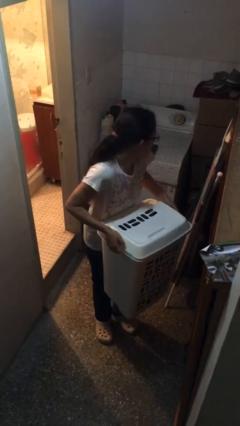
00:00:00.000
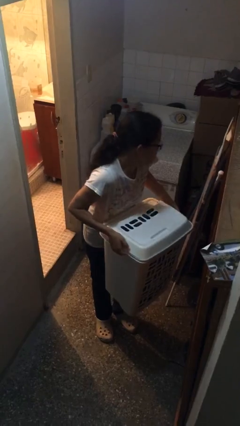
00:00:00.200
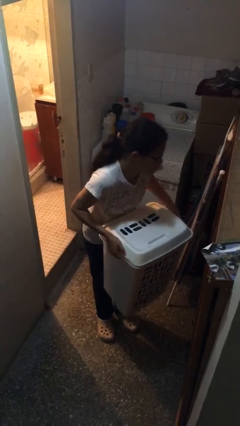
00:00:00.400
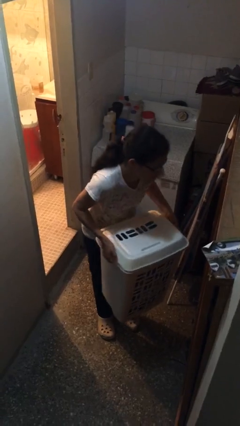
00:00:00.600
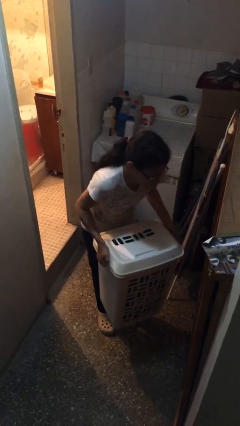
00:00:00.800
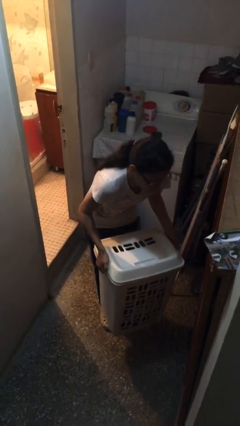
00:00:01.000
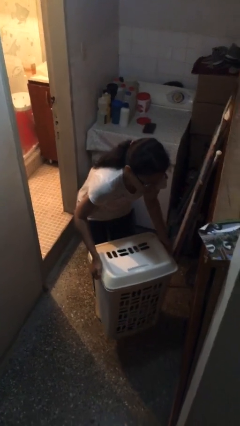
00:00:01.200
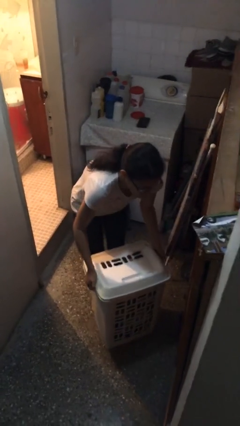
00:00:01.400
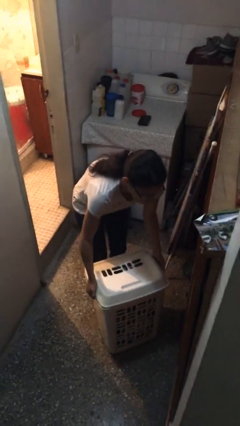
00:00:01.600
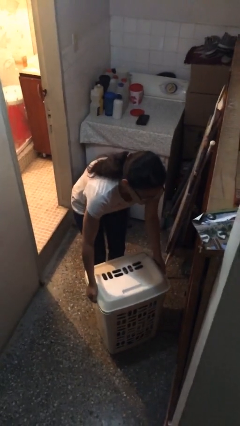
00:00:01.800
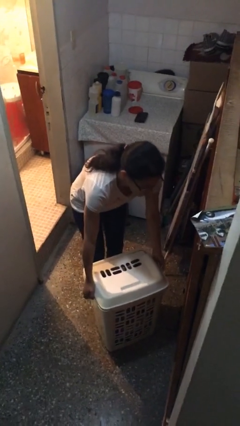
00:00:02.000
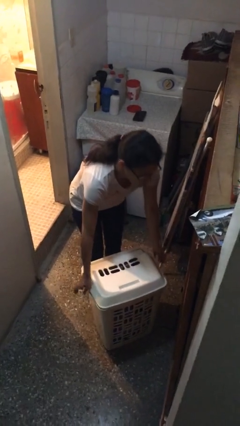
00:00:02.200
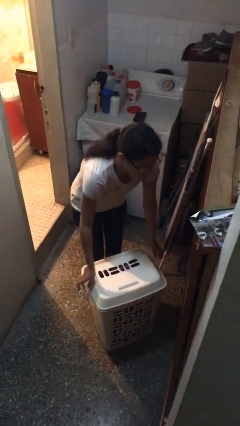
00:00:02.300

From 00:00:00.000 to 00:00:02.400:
person puts down object on floor

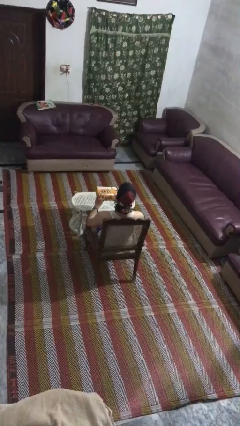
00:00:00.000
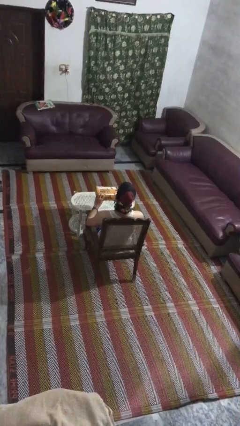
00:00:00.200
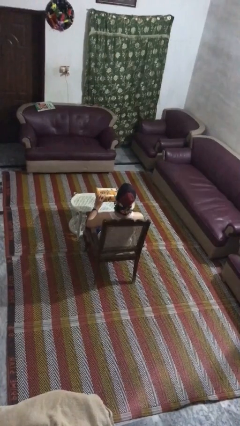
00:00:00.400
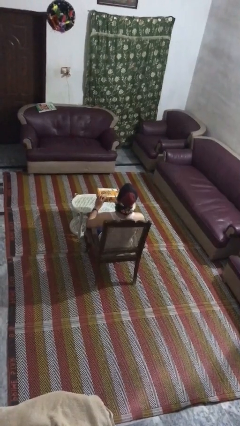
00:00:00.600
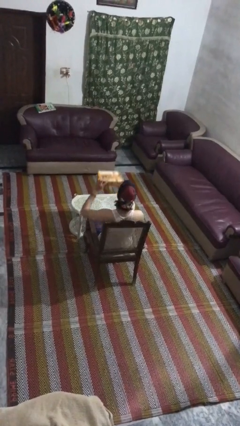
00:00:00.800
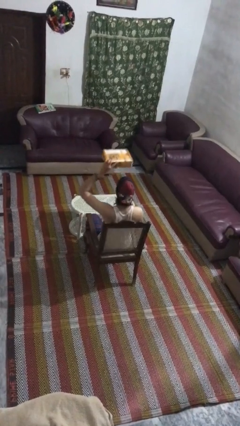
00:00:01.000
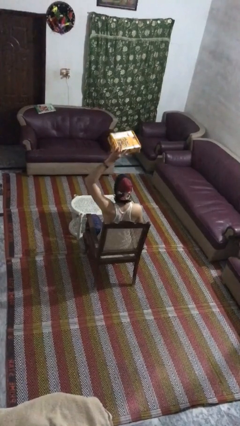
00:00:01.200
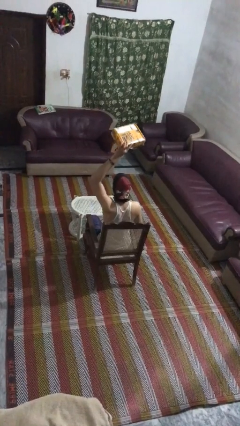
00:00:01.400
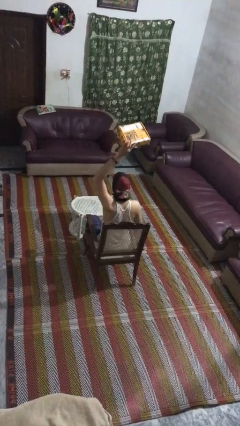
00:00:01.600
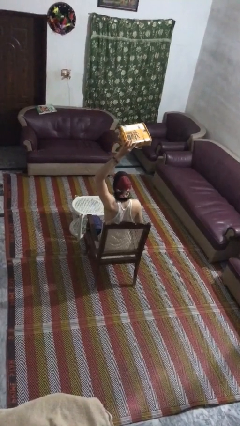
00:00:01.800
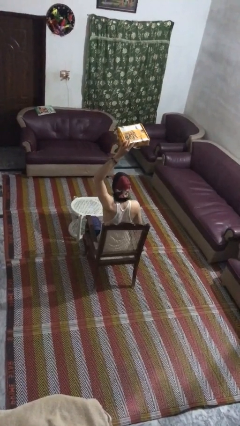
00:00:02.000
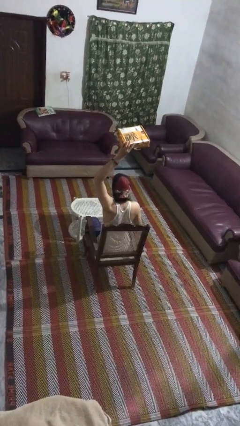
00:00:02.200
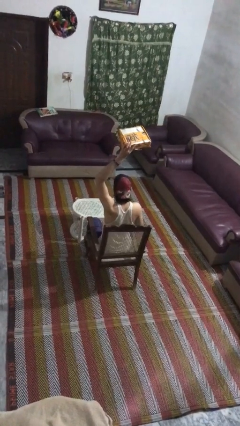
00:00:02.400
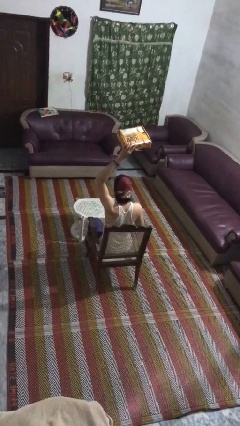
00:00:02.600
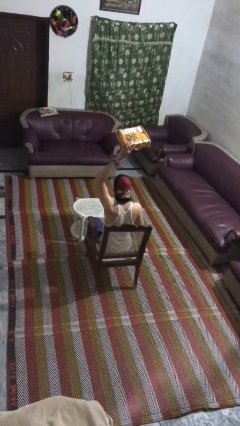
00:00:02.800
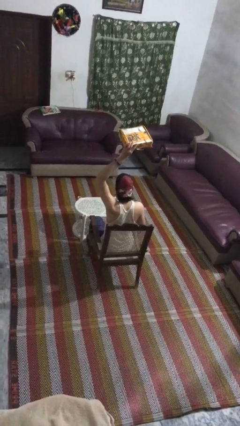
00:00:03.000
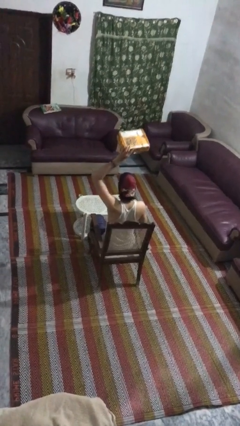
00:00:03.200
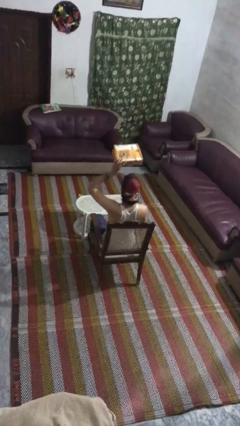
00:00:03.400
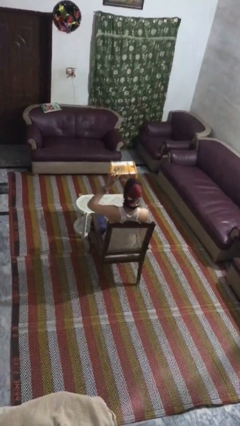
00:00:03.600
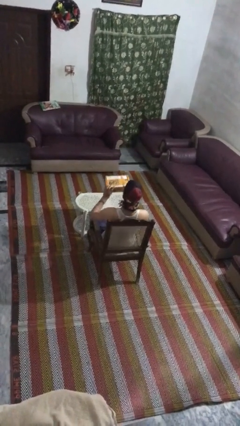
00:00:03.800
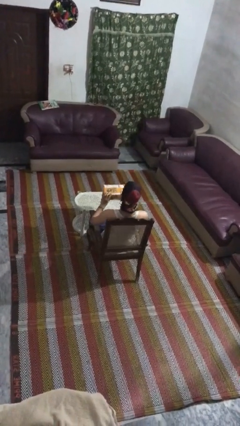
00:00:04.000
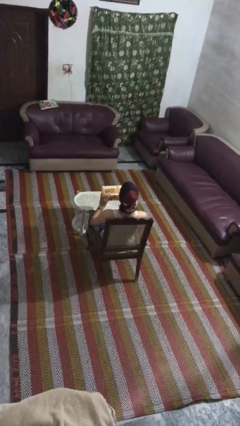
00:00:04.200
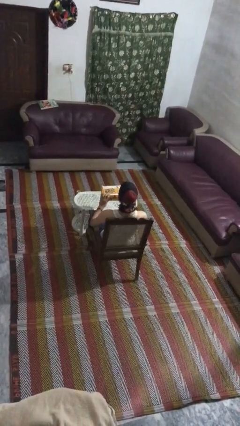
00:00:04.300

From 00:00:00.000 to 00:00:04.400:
person holds object above head

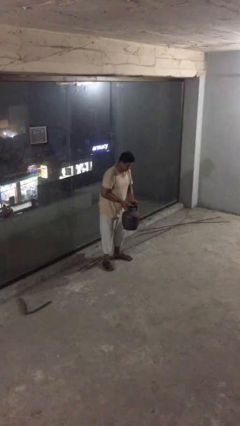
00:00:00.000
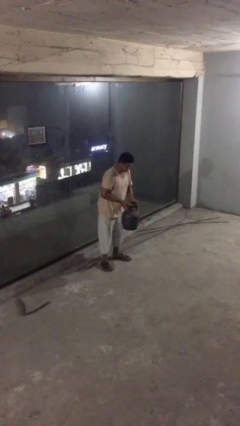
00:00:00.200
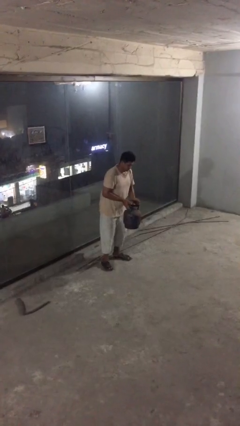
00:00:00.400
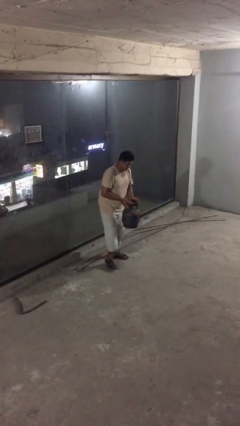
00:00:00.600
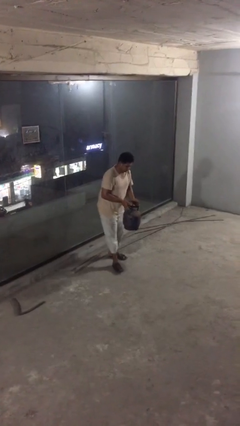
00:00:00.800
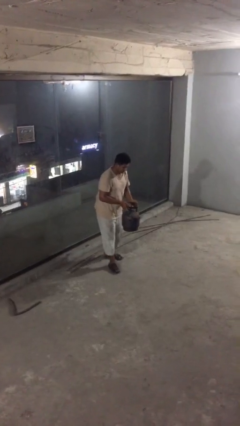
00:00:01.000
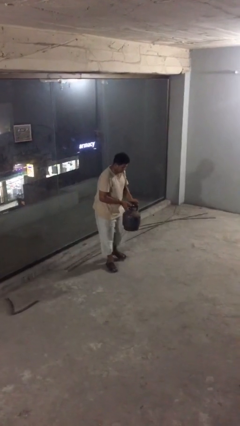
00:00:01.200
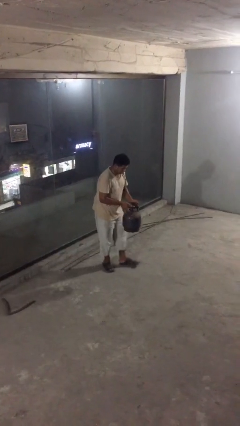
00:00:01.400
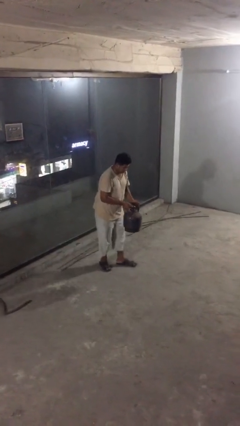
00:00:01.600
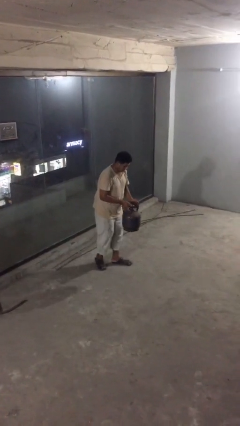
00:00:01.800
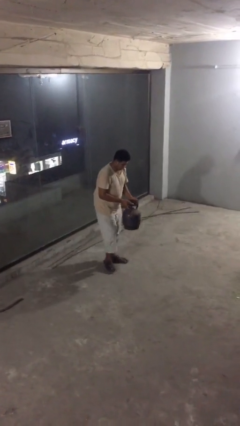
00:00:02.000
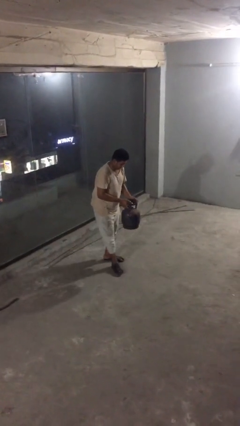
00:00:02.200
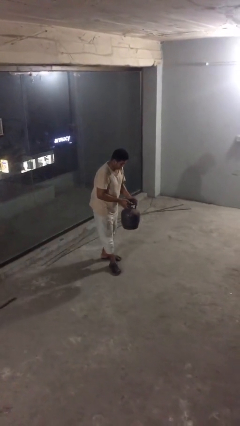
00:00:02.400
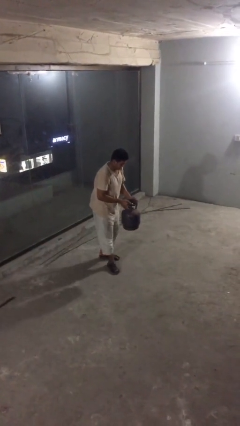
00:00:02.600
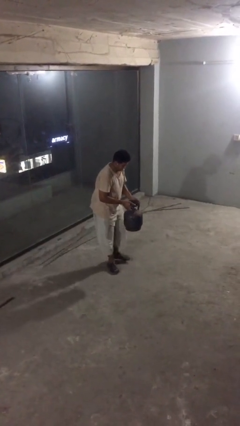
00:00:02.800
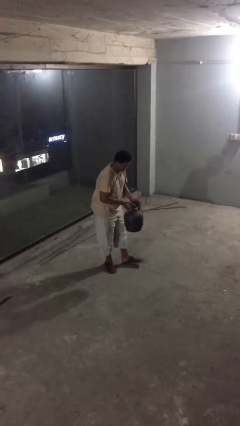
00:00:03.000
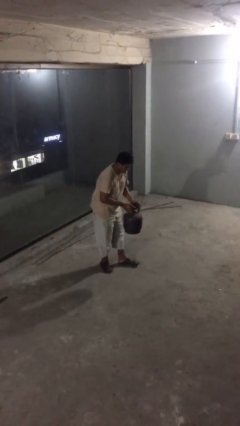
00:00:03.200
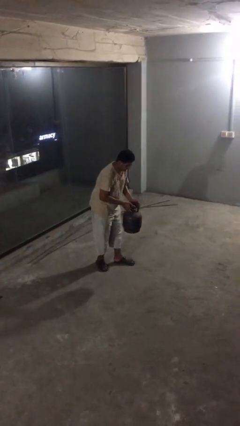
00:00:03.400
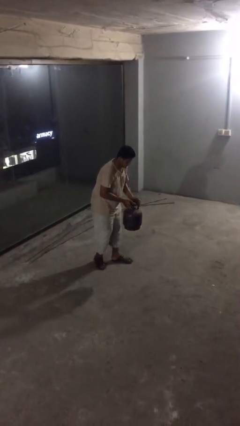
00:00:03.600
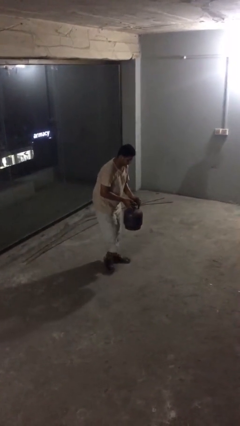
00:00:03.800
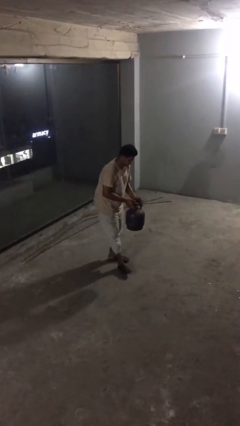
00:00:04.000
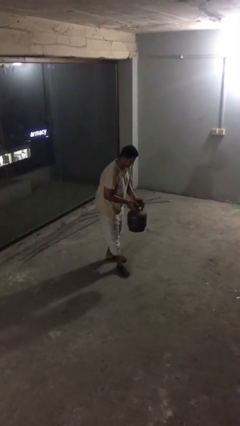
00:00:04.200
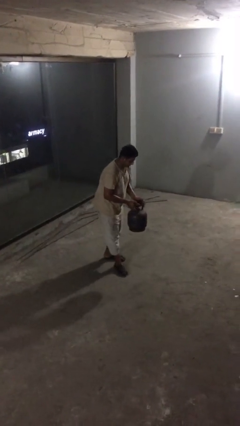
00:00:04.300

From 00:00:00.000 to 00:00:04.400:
person carries heavy object

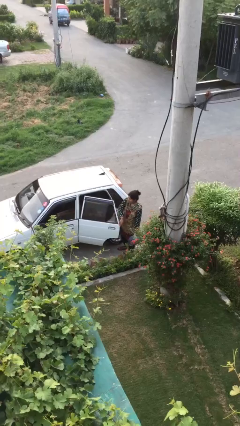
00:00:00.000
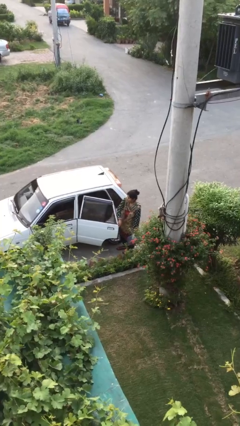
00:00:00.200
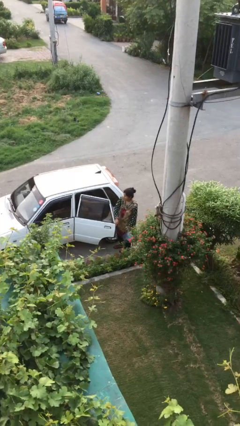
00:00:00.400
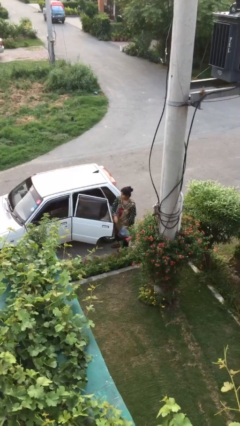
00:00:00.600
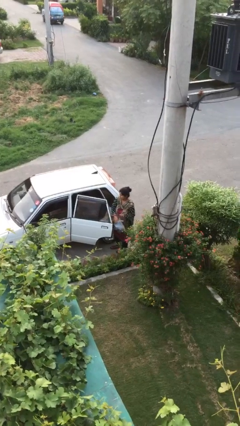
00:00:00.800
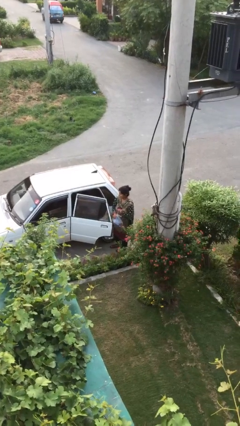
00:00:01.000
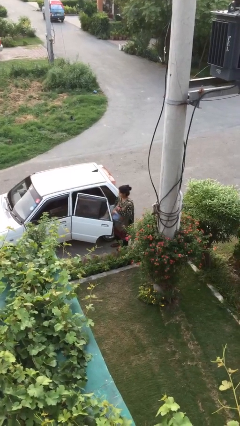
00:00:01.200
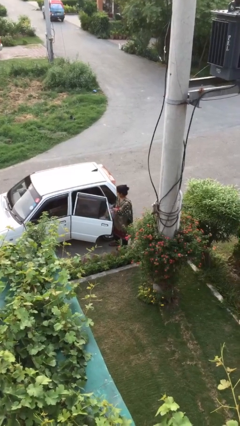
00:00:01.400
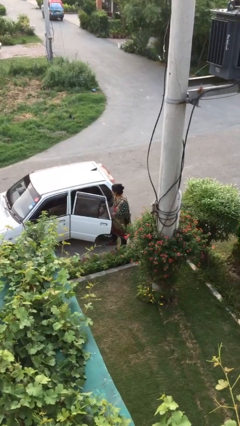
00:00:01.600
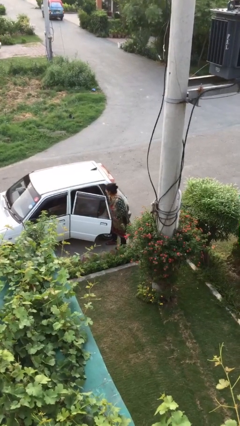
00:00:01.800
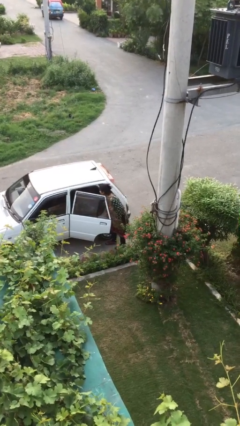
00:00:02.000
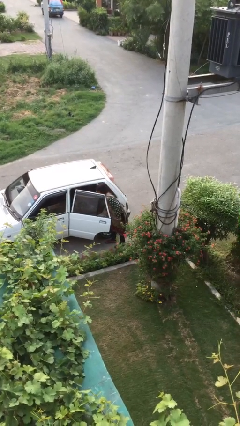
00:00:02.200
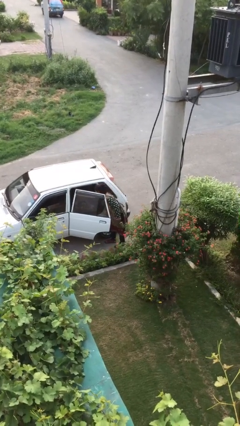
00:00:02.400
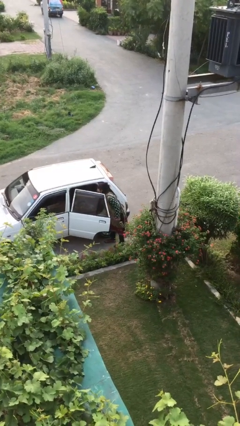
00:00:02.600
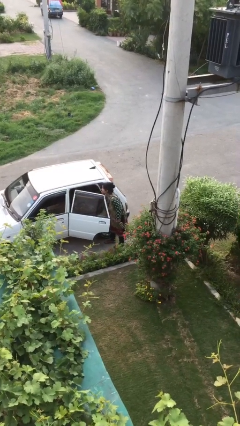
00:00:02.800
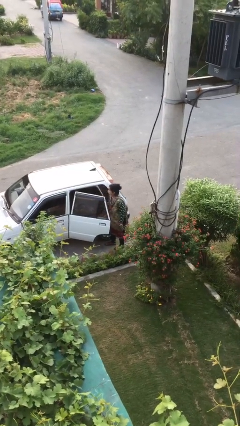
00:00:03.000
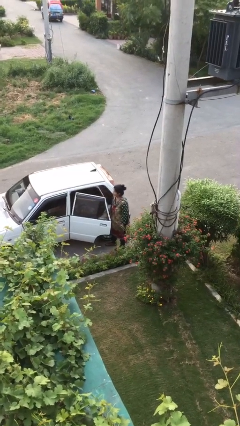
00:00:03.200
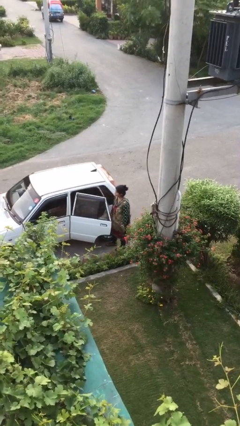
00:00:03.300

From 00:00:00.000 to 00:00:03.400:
person loads car

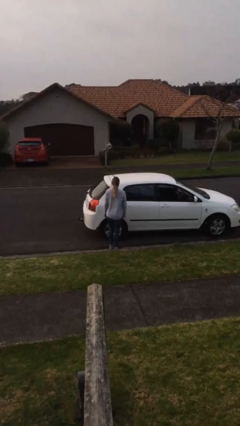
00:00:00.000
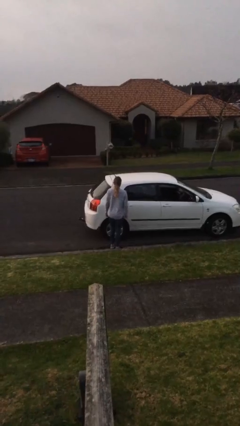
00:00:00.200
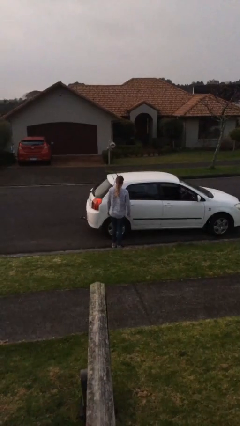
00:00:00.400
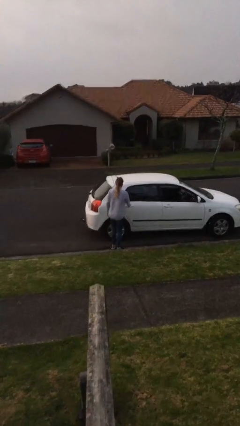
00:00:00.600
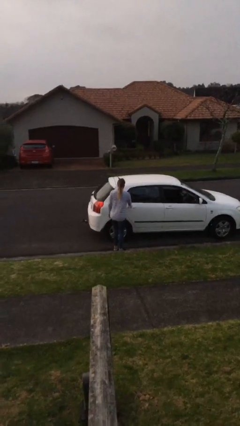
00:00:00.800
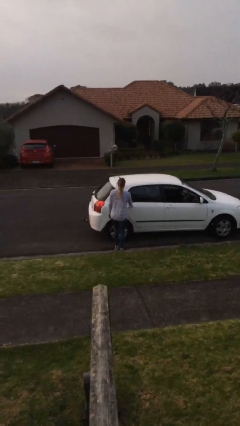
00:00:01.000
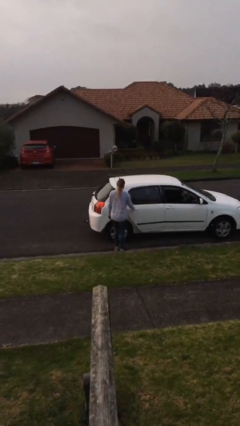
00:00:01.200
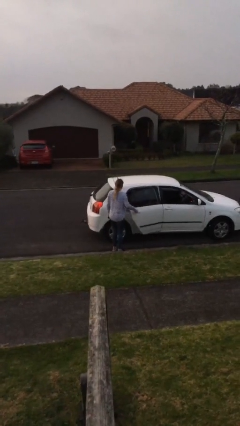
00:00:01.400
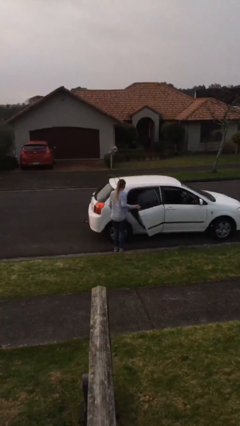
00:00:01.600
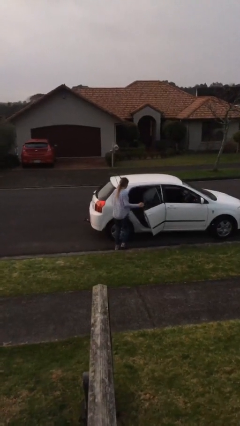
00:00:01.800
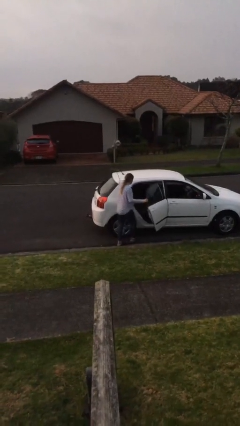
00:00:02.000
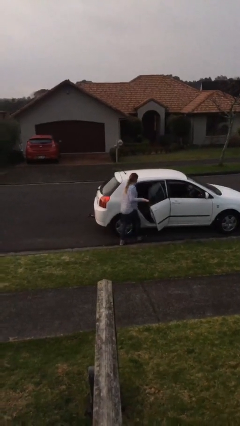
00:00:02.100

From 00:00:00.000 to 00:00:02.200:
person opens car door

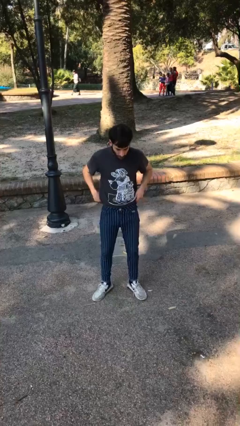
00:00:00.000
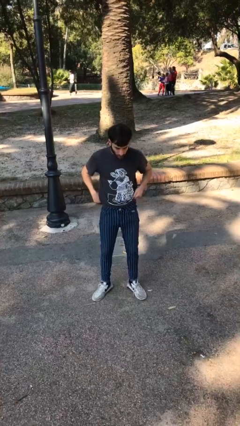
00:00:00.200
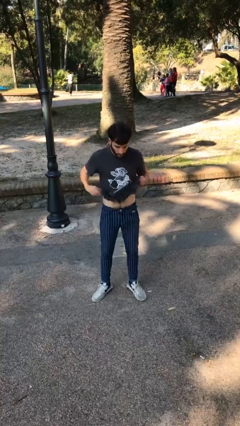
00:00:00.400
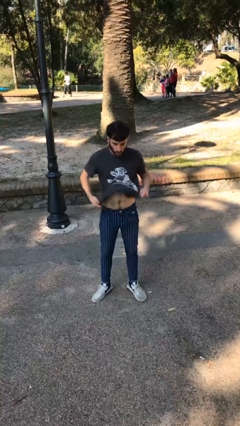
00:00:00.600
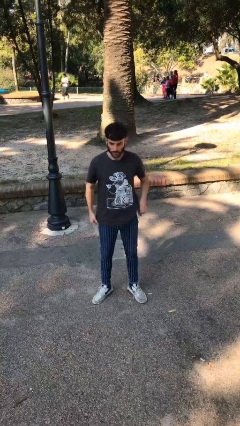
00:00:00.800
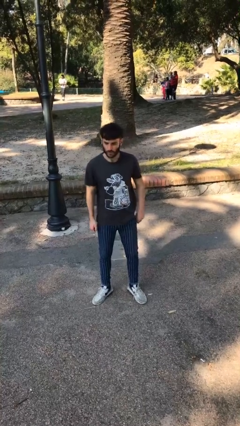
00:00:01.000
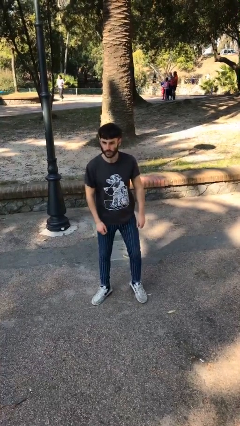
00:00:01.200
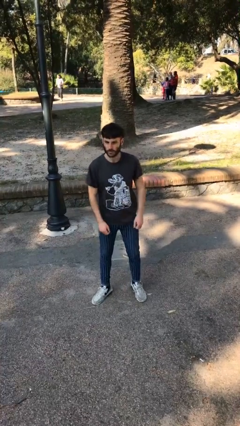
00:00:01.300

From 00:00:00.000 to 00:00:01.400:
person untucks shirt
